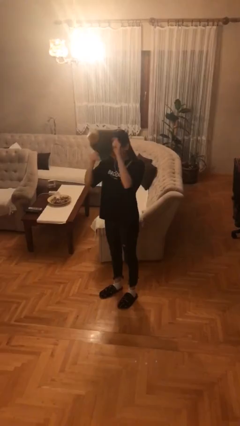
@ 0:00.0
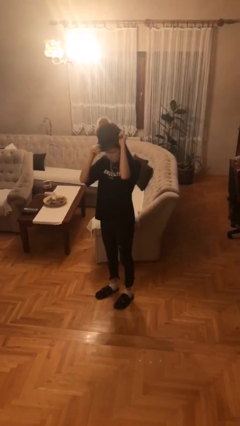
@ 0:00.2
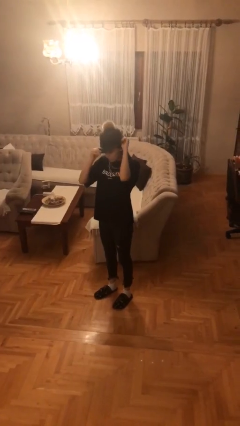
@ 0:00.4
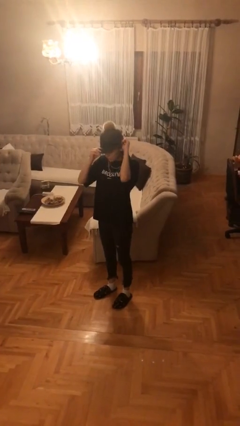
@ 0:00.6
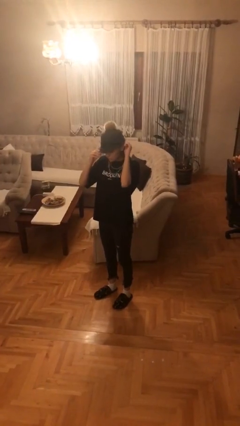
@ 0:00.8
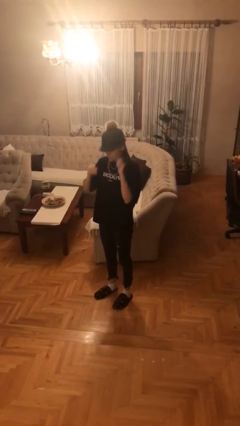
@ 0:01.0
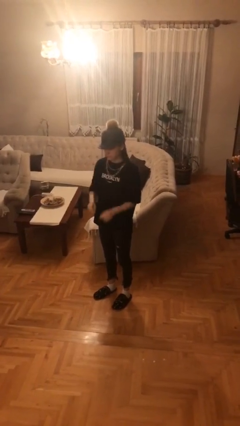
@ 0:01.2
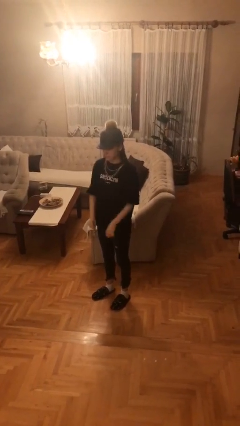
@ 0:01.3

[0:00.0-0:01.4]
person puts on hat

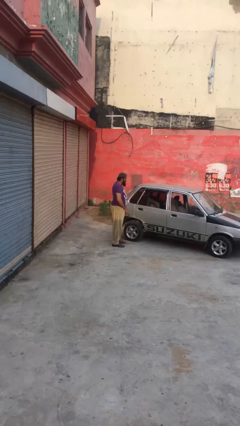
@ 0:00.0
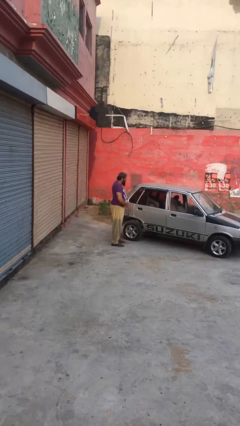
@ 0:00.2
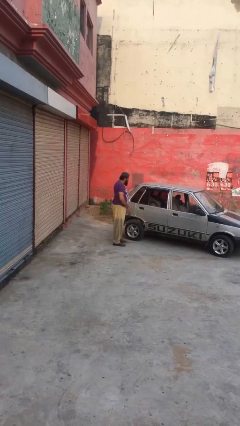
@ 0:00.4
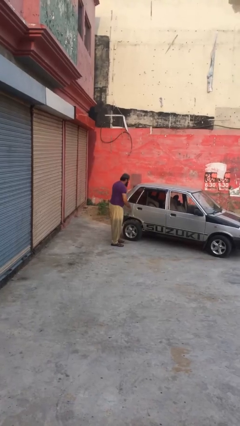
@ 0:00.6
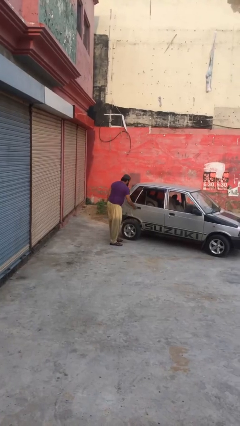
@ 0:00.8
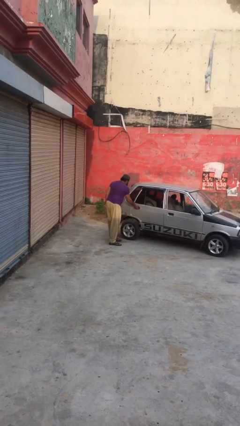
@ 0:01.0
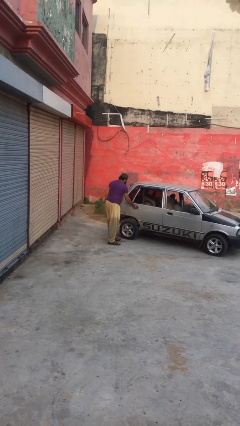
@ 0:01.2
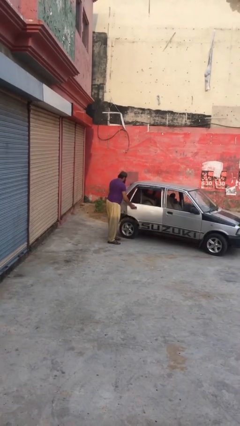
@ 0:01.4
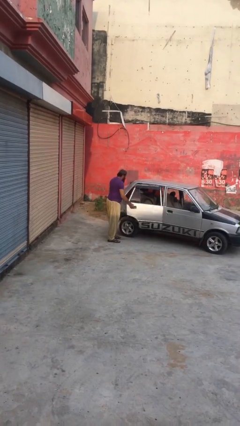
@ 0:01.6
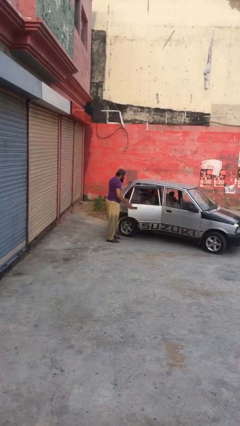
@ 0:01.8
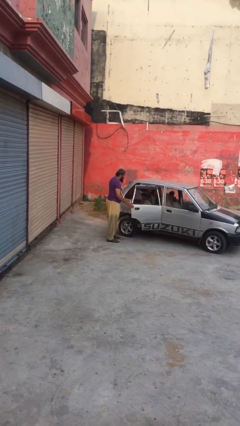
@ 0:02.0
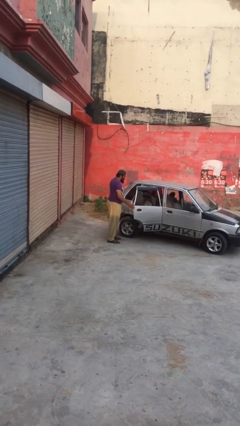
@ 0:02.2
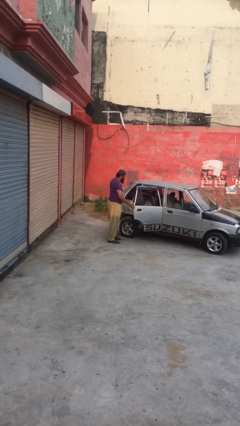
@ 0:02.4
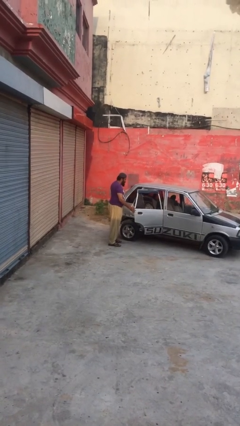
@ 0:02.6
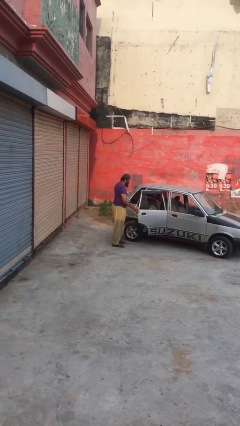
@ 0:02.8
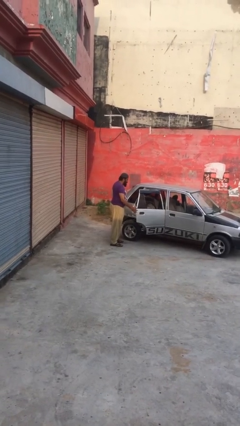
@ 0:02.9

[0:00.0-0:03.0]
person opens car door

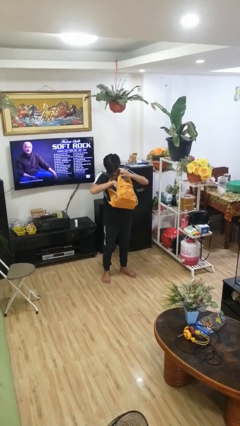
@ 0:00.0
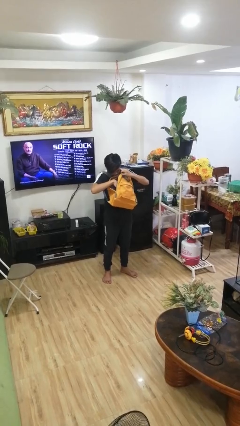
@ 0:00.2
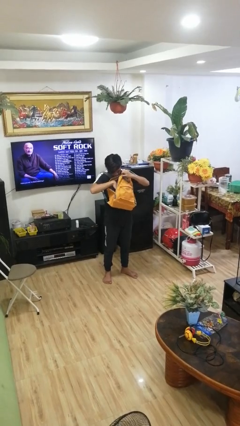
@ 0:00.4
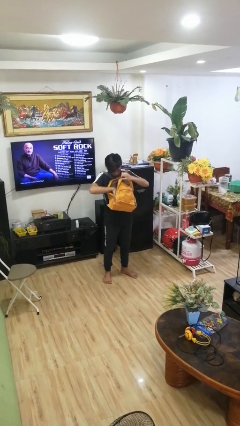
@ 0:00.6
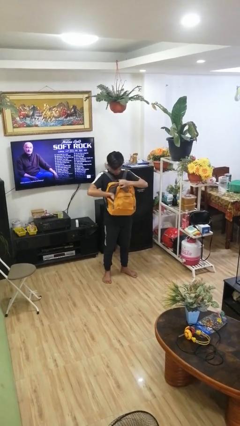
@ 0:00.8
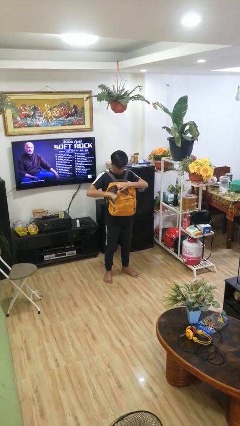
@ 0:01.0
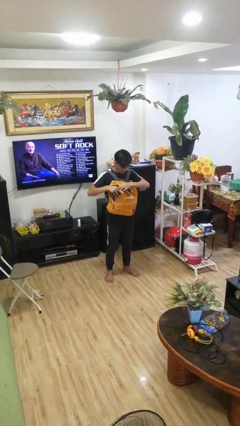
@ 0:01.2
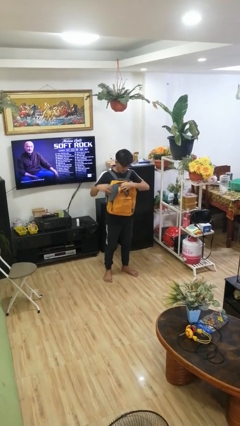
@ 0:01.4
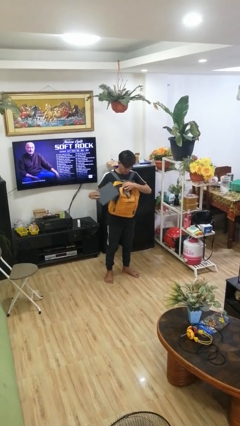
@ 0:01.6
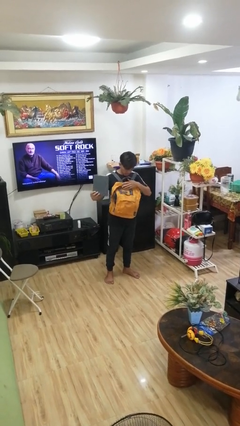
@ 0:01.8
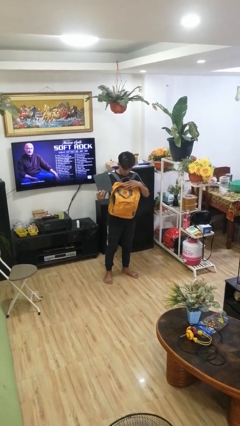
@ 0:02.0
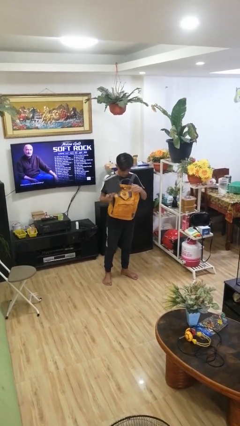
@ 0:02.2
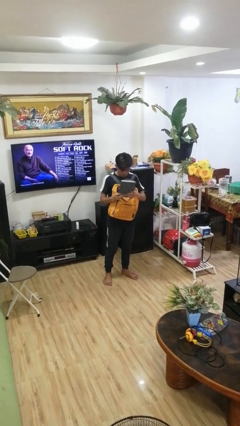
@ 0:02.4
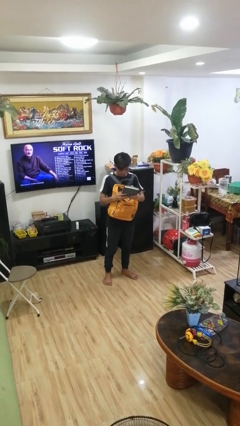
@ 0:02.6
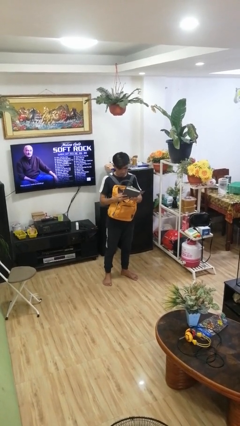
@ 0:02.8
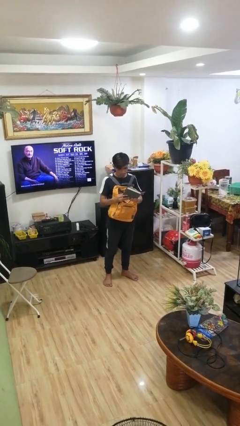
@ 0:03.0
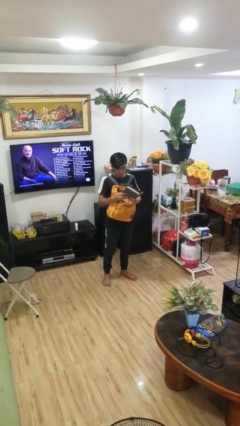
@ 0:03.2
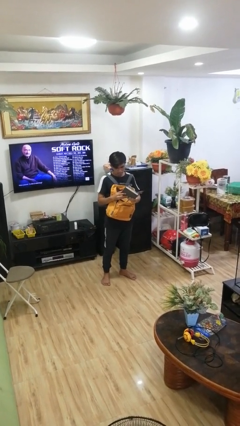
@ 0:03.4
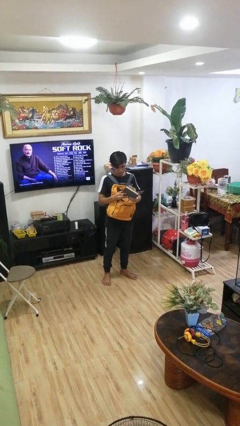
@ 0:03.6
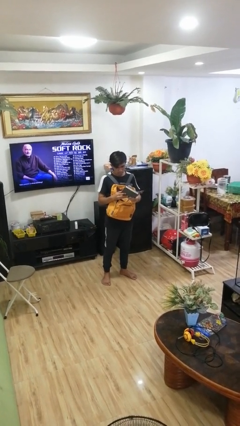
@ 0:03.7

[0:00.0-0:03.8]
person takes object from backpack

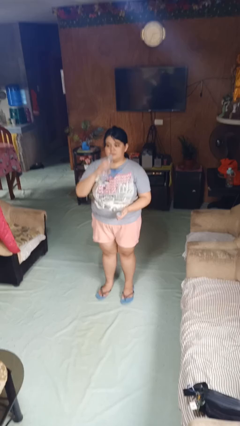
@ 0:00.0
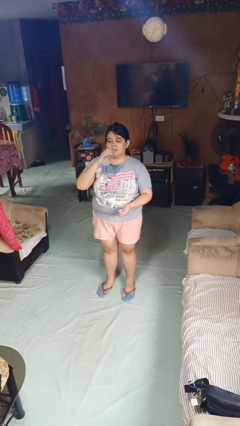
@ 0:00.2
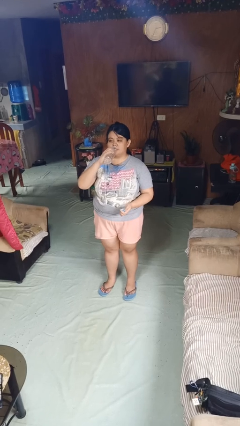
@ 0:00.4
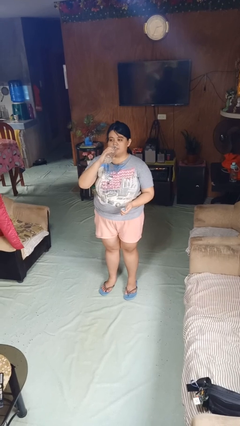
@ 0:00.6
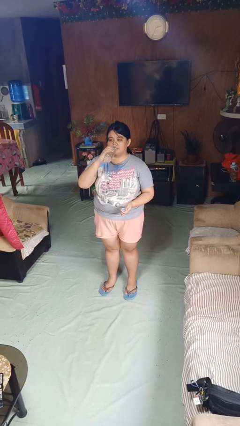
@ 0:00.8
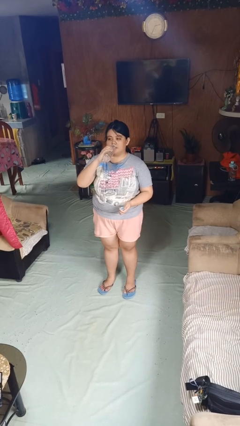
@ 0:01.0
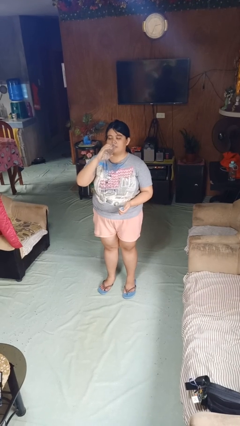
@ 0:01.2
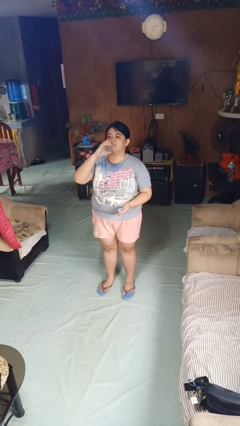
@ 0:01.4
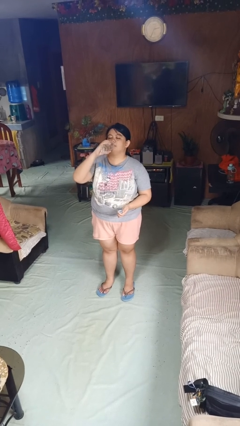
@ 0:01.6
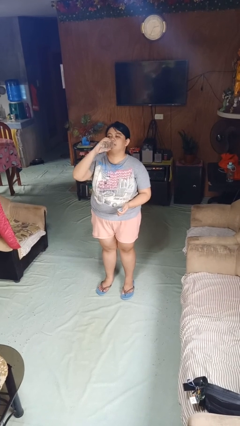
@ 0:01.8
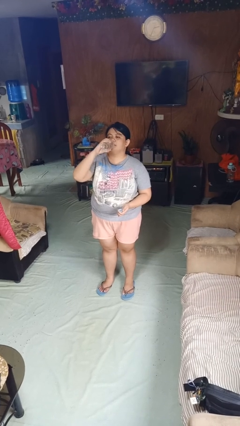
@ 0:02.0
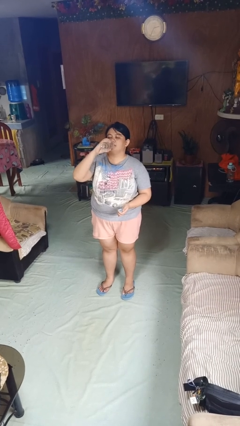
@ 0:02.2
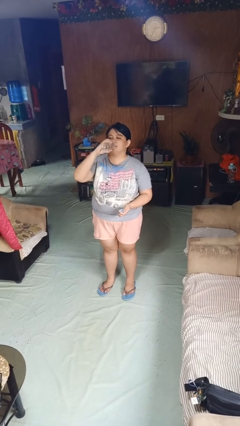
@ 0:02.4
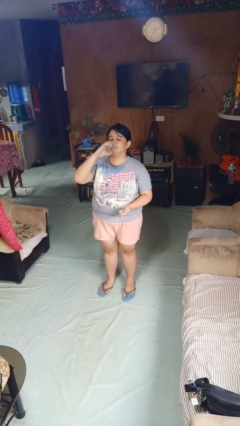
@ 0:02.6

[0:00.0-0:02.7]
person drinks from bottle

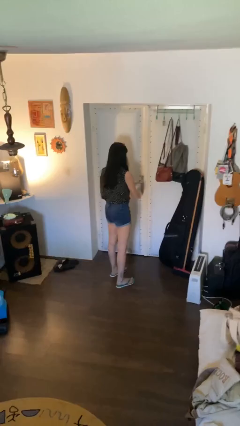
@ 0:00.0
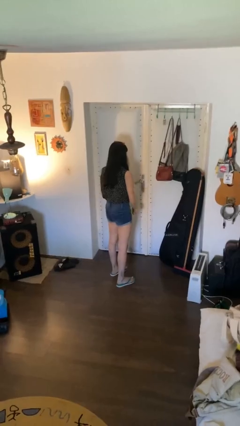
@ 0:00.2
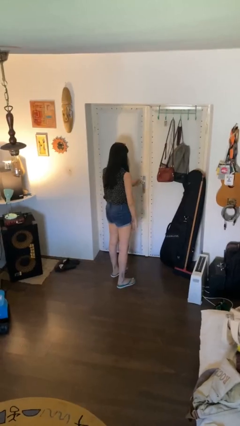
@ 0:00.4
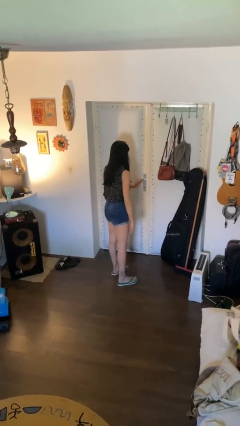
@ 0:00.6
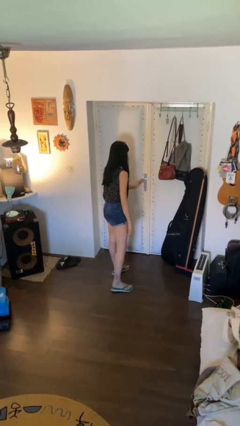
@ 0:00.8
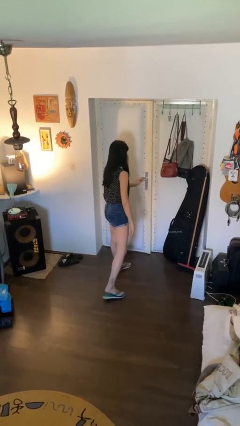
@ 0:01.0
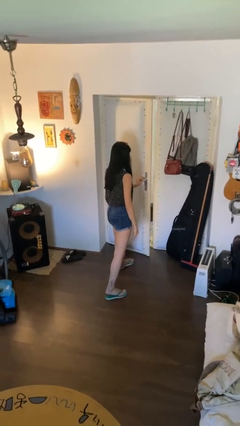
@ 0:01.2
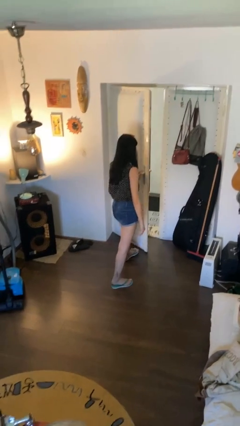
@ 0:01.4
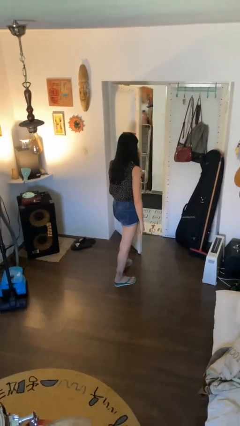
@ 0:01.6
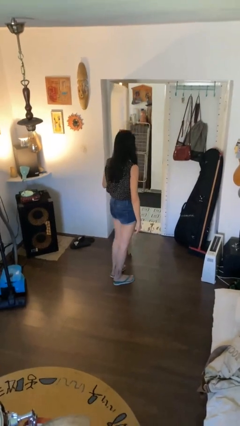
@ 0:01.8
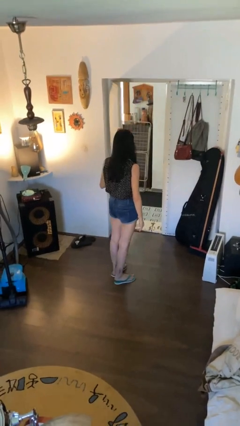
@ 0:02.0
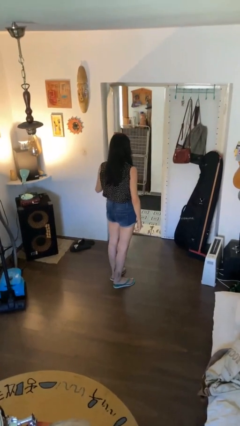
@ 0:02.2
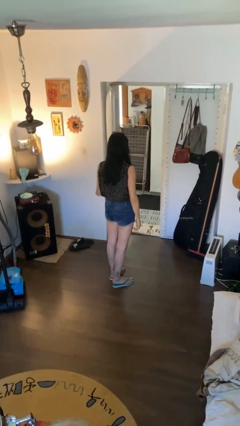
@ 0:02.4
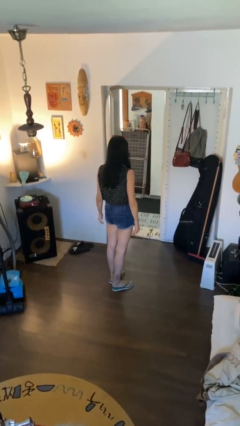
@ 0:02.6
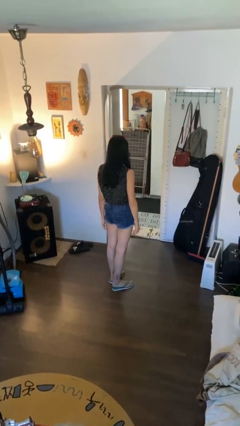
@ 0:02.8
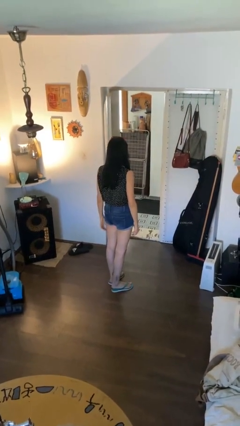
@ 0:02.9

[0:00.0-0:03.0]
person opens facility door

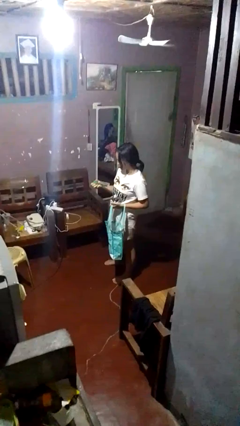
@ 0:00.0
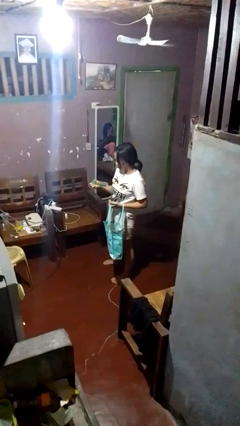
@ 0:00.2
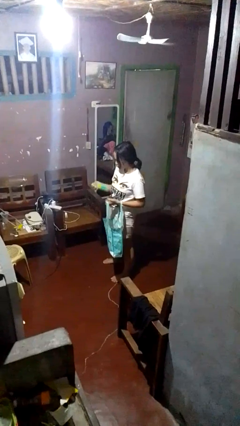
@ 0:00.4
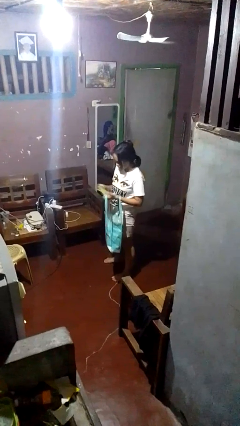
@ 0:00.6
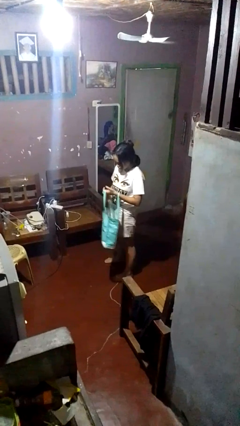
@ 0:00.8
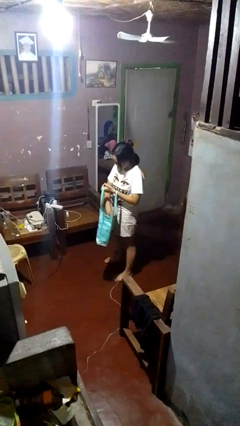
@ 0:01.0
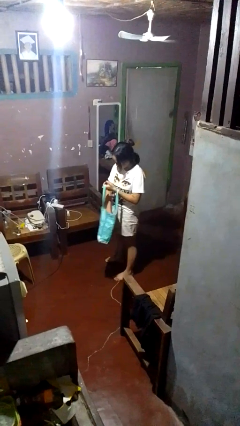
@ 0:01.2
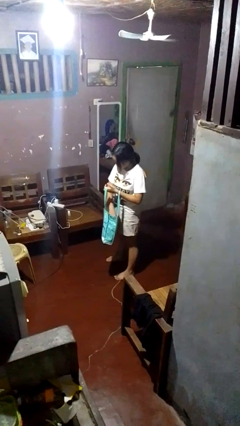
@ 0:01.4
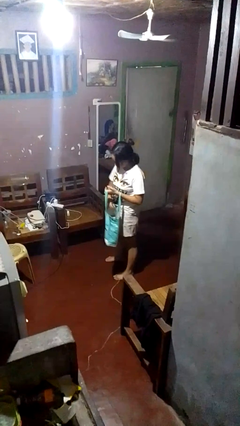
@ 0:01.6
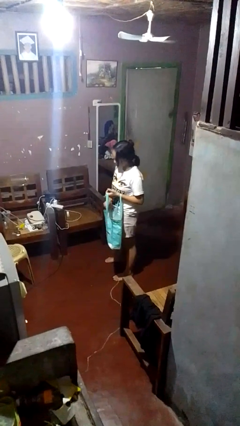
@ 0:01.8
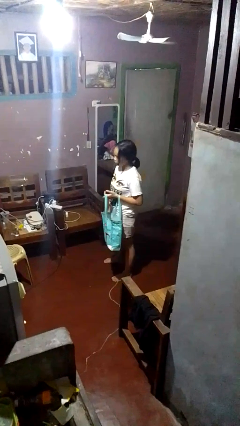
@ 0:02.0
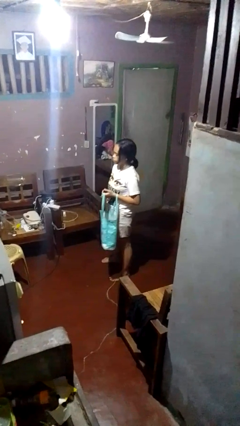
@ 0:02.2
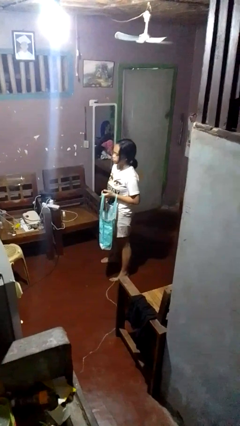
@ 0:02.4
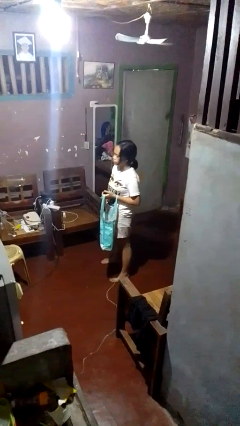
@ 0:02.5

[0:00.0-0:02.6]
person puts object into bag

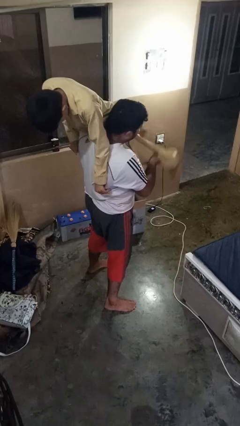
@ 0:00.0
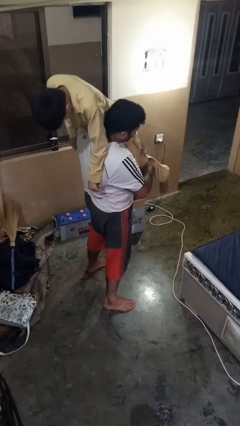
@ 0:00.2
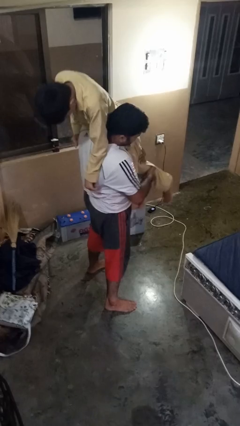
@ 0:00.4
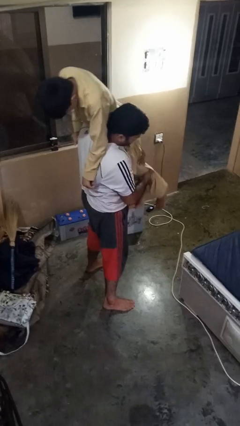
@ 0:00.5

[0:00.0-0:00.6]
person puts down person
